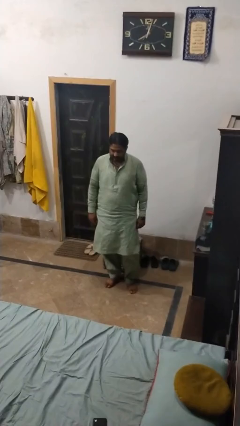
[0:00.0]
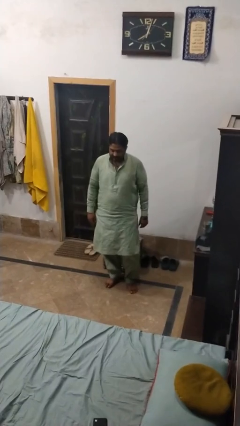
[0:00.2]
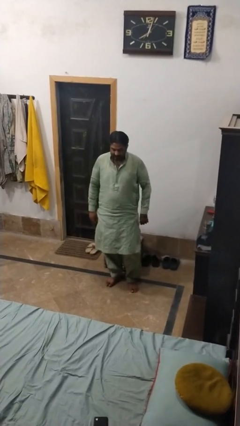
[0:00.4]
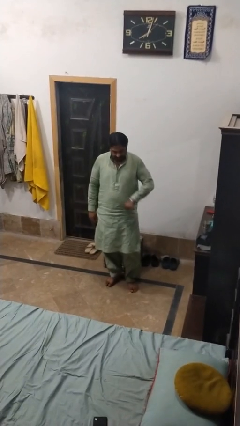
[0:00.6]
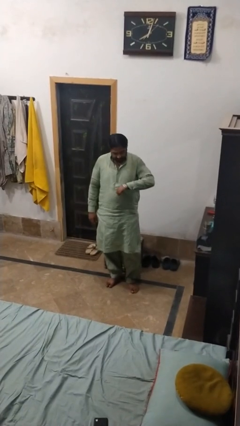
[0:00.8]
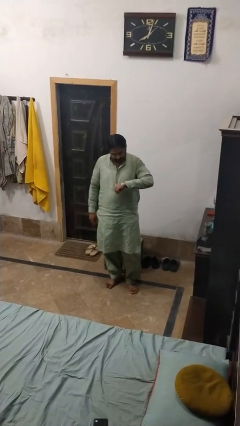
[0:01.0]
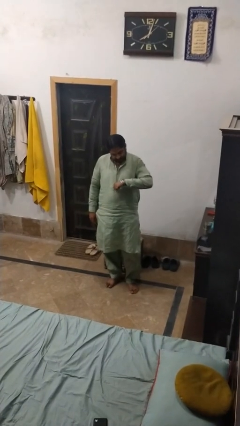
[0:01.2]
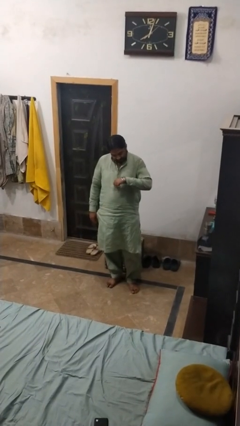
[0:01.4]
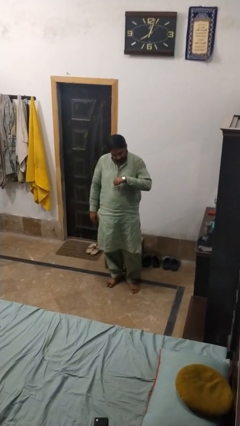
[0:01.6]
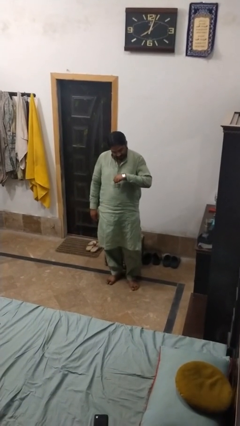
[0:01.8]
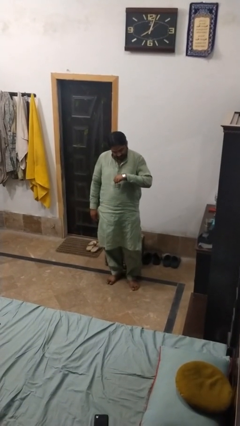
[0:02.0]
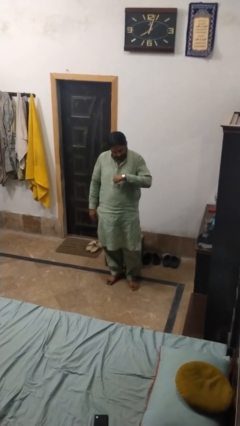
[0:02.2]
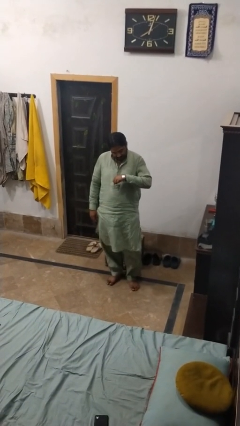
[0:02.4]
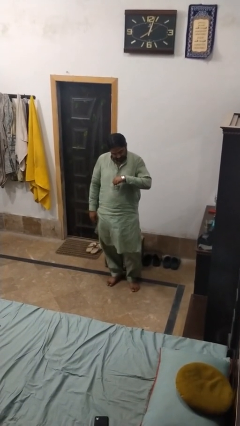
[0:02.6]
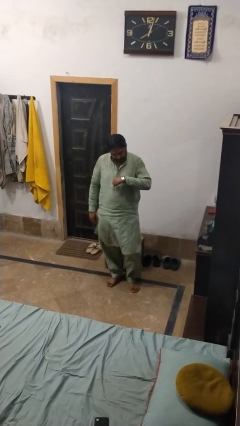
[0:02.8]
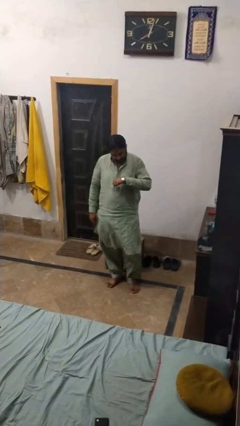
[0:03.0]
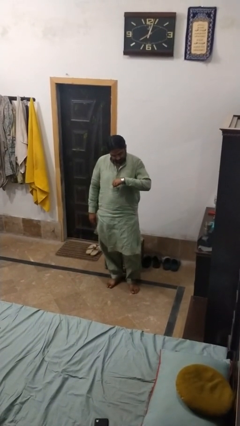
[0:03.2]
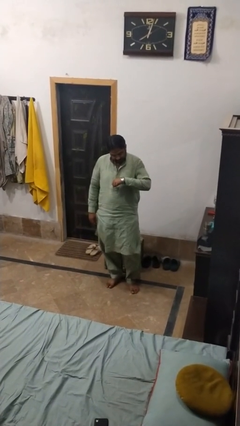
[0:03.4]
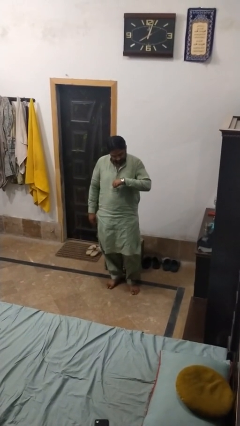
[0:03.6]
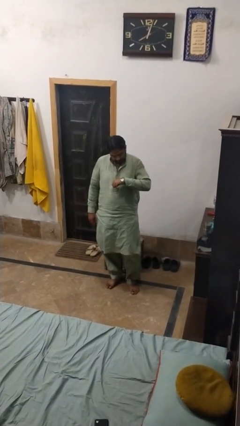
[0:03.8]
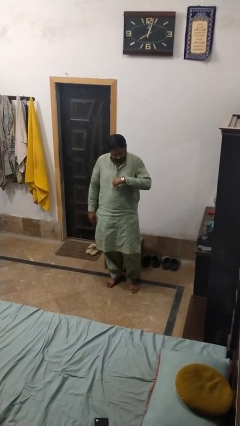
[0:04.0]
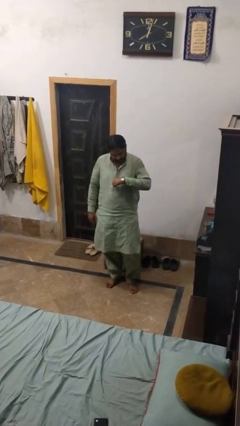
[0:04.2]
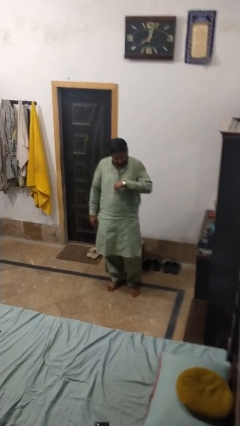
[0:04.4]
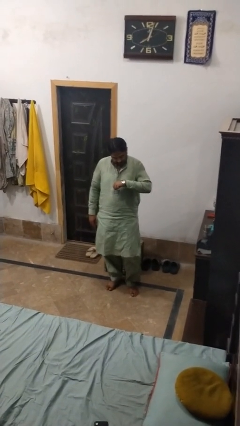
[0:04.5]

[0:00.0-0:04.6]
person looks at wristwatch

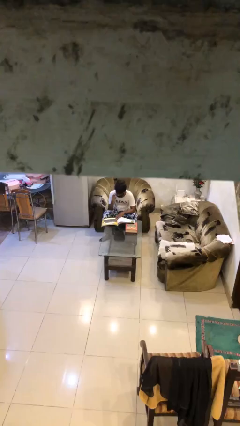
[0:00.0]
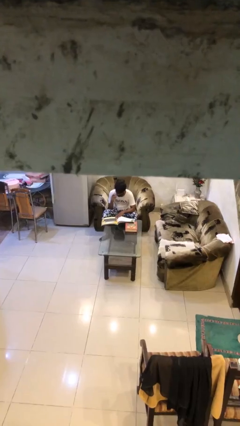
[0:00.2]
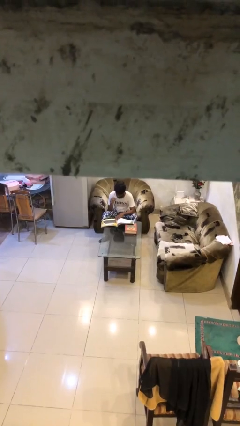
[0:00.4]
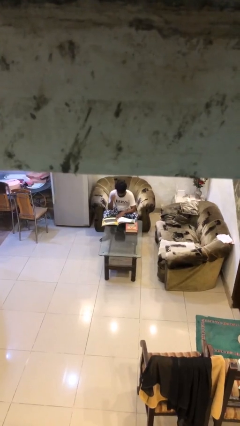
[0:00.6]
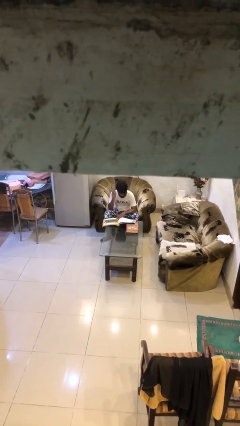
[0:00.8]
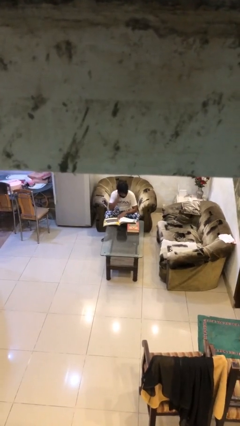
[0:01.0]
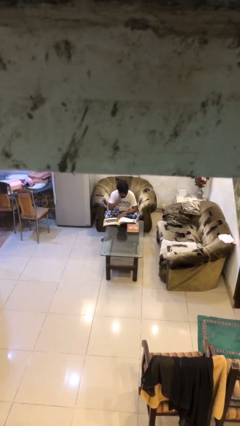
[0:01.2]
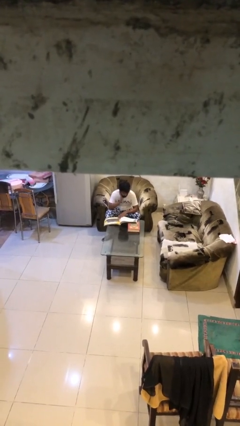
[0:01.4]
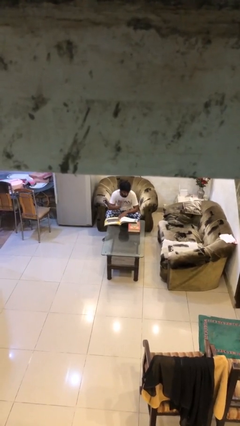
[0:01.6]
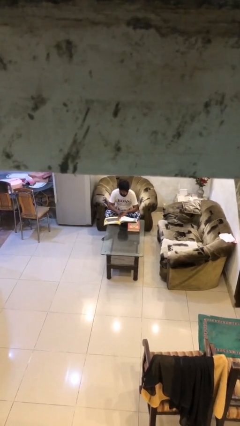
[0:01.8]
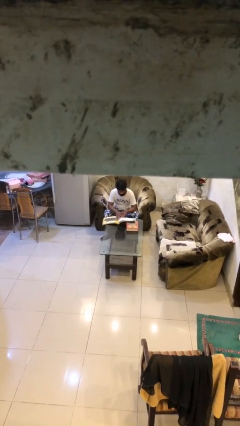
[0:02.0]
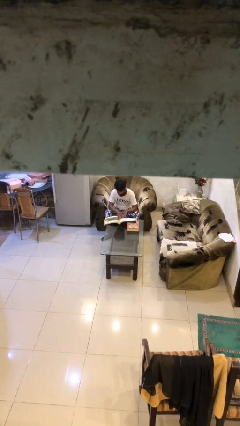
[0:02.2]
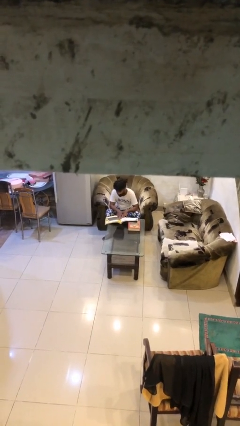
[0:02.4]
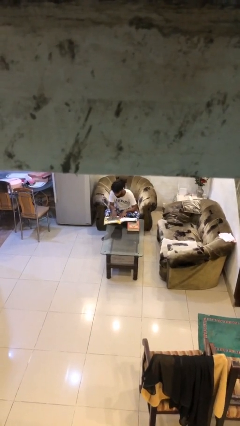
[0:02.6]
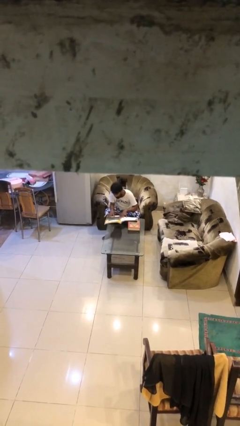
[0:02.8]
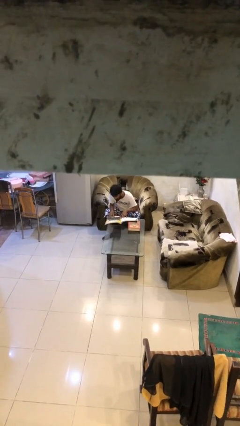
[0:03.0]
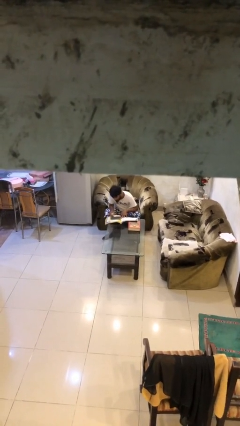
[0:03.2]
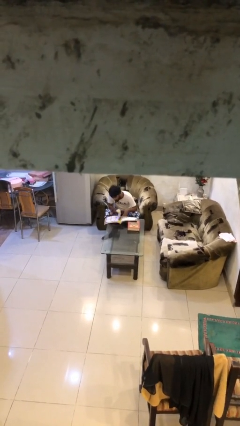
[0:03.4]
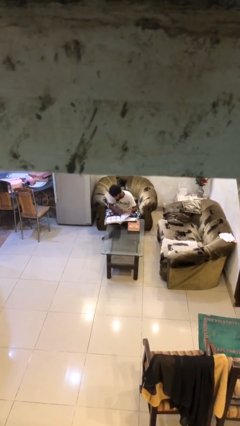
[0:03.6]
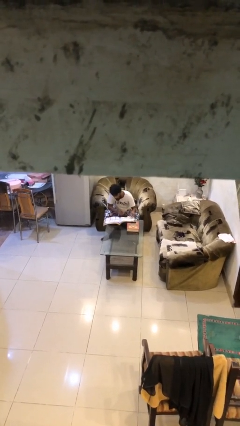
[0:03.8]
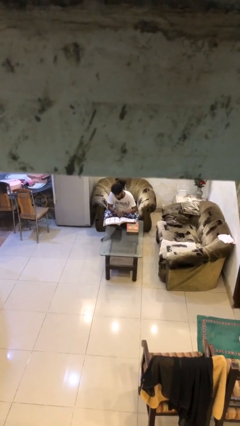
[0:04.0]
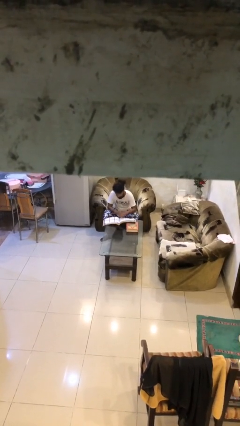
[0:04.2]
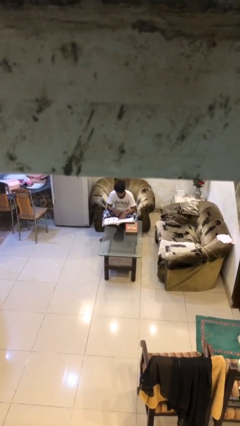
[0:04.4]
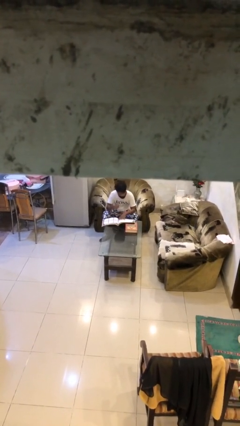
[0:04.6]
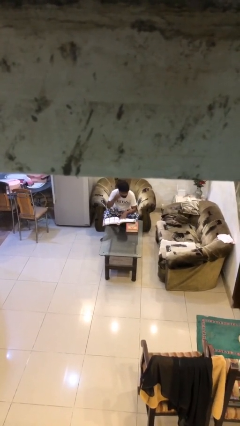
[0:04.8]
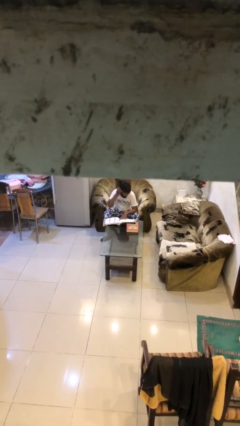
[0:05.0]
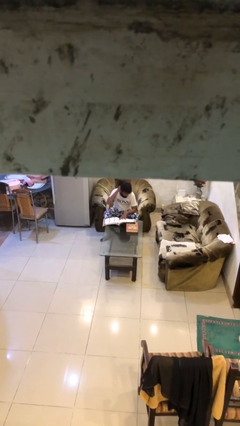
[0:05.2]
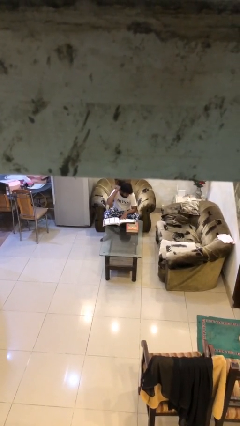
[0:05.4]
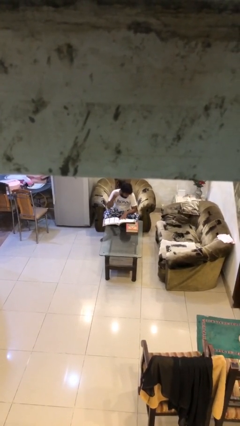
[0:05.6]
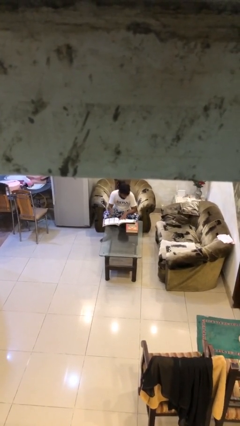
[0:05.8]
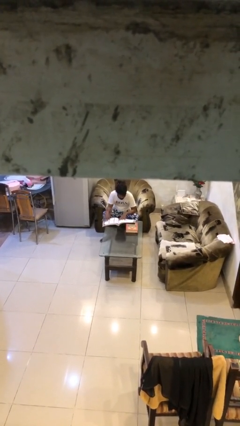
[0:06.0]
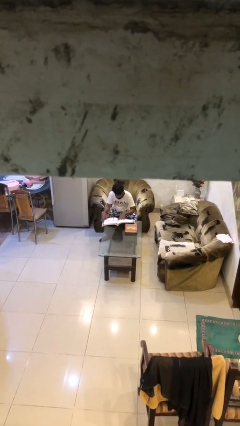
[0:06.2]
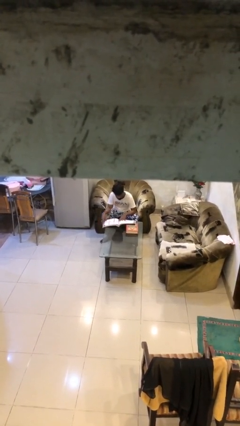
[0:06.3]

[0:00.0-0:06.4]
person reads document

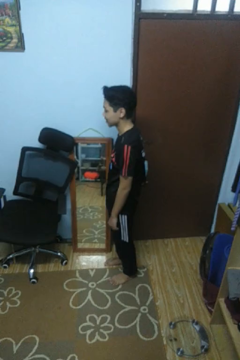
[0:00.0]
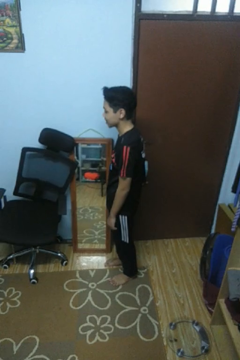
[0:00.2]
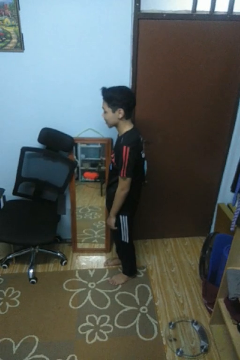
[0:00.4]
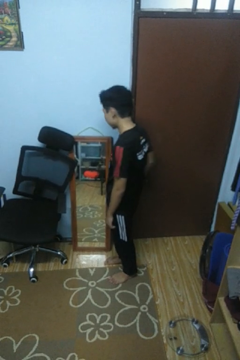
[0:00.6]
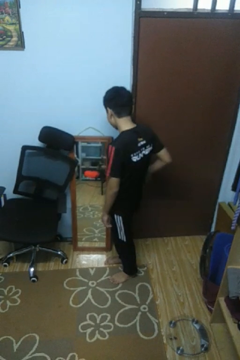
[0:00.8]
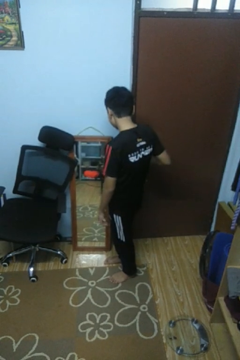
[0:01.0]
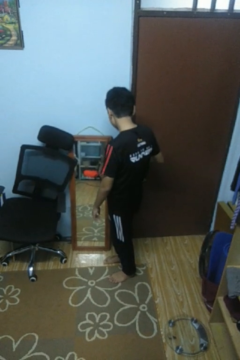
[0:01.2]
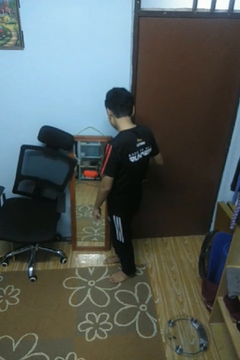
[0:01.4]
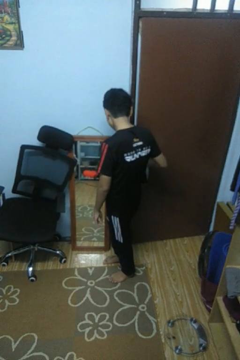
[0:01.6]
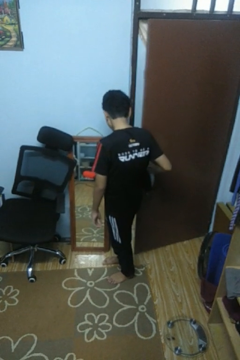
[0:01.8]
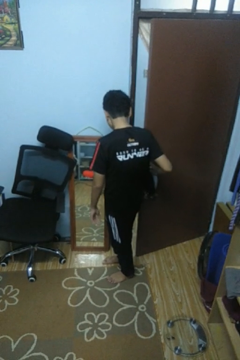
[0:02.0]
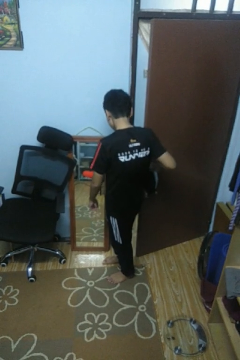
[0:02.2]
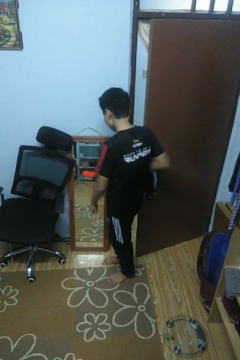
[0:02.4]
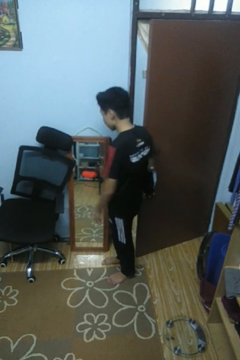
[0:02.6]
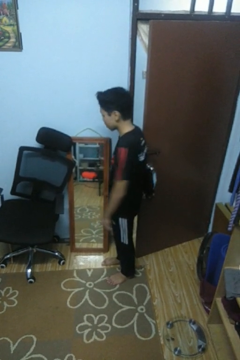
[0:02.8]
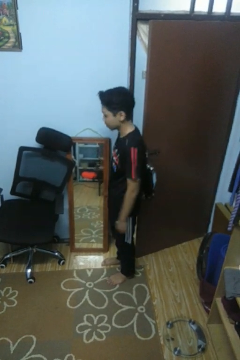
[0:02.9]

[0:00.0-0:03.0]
person opens facility door

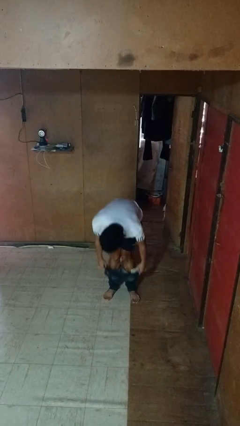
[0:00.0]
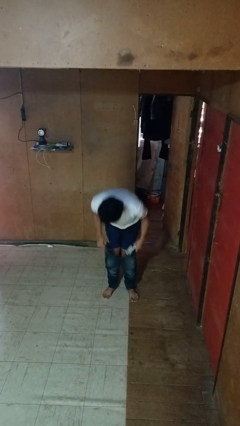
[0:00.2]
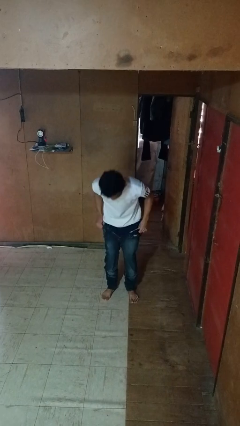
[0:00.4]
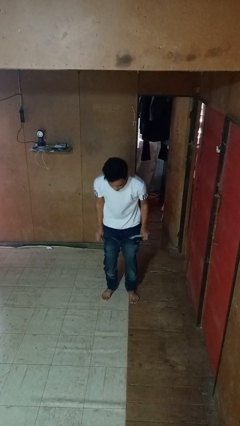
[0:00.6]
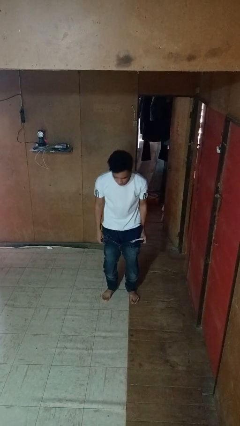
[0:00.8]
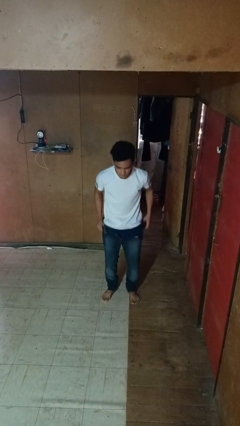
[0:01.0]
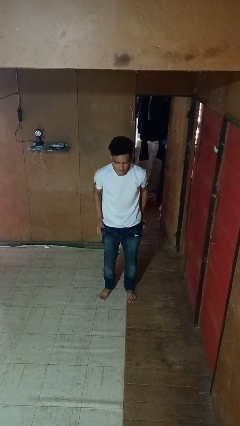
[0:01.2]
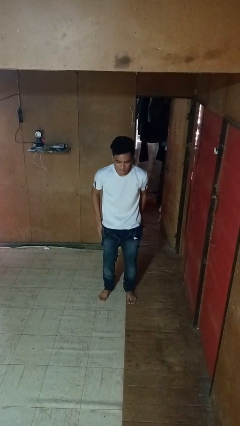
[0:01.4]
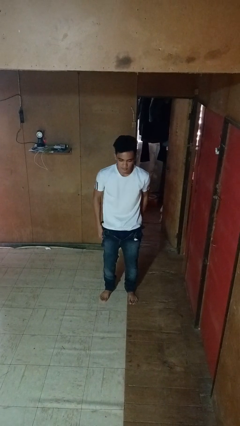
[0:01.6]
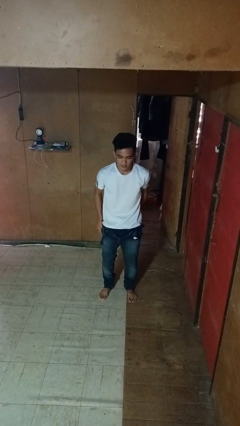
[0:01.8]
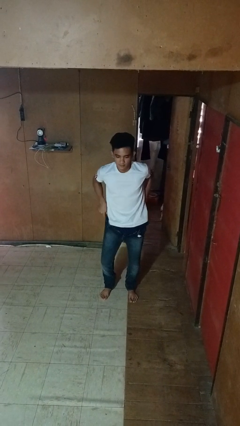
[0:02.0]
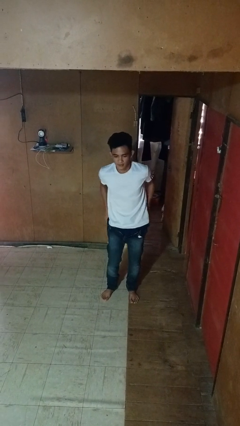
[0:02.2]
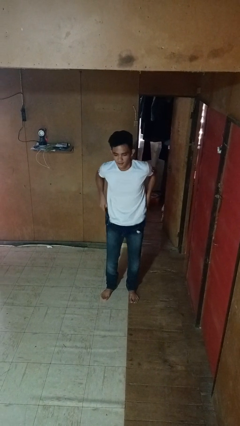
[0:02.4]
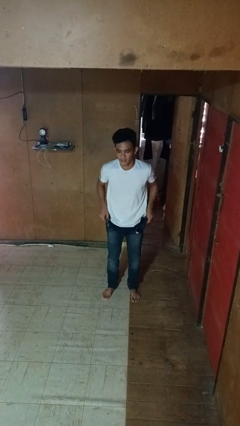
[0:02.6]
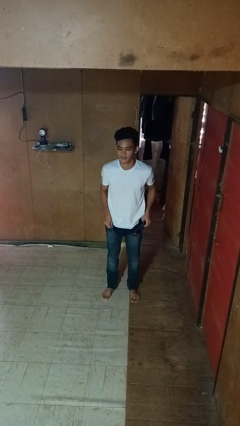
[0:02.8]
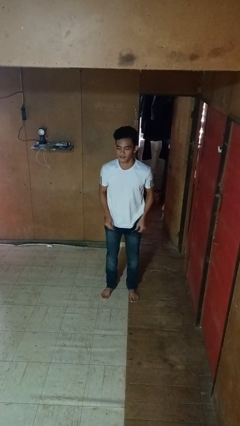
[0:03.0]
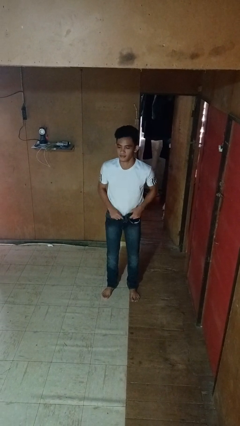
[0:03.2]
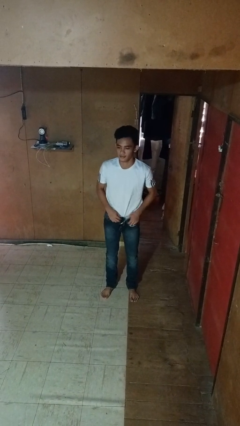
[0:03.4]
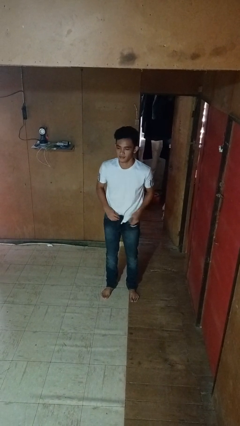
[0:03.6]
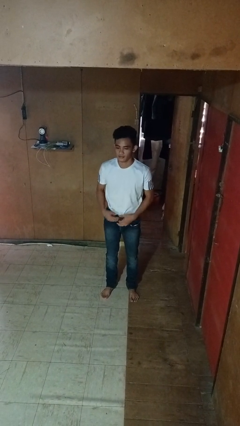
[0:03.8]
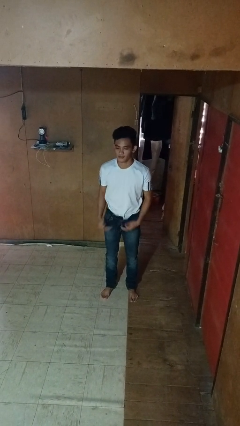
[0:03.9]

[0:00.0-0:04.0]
person puts on pants

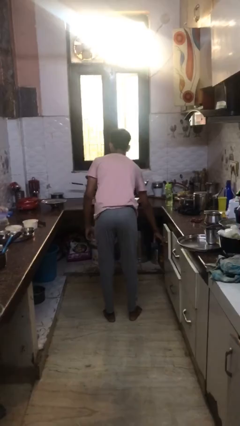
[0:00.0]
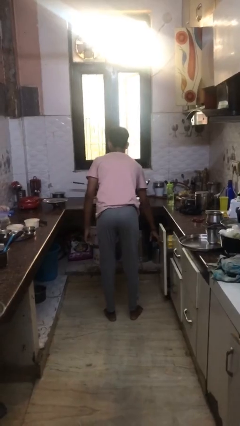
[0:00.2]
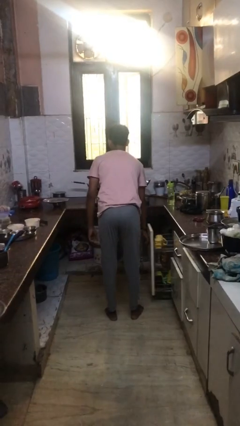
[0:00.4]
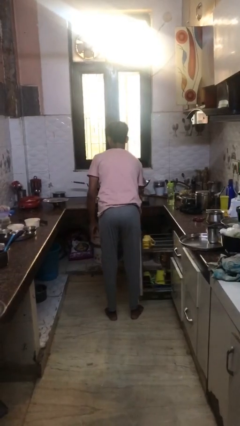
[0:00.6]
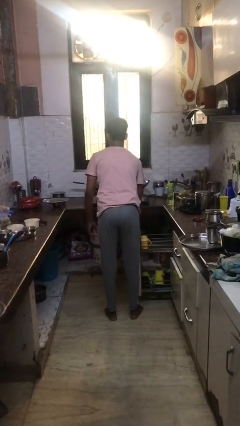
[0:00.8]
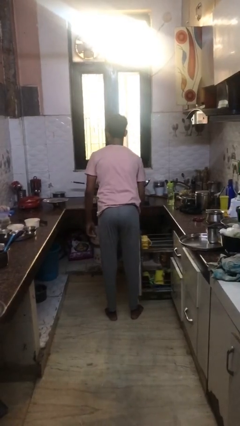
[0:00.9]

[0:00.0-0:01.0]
person opens dishwasher
